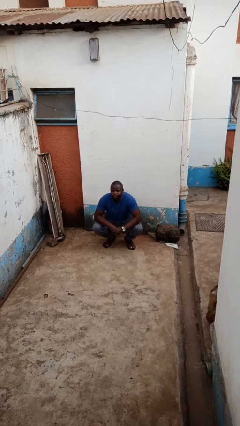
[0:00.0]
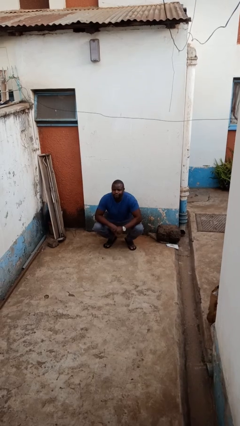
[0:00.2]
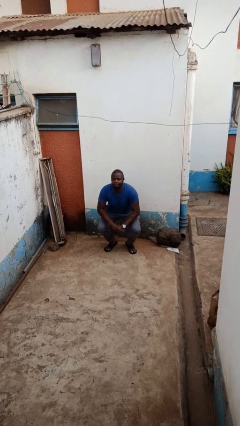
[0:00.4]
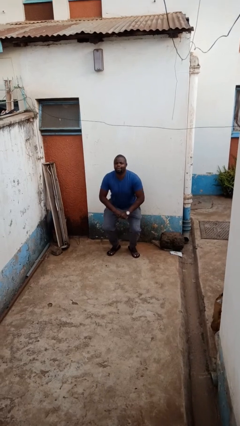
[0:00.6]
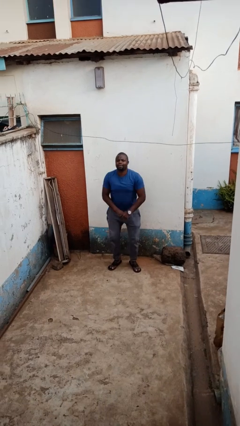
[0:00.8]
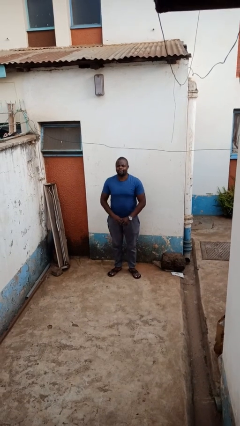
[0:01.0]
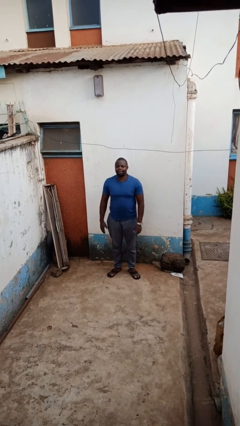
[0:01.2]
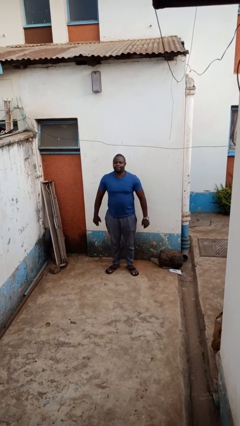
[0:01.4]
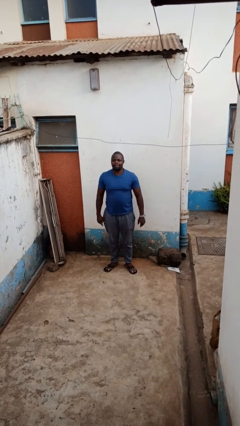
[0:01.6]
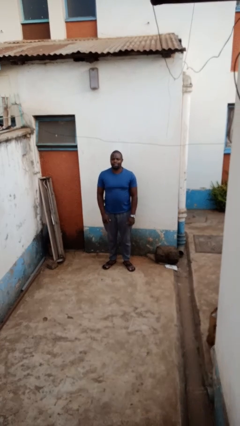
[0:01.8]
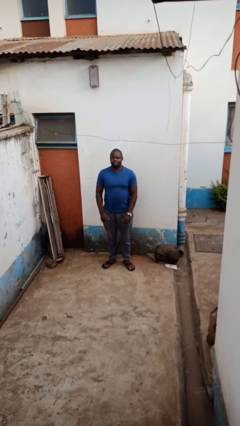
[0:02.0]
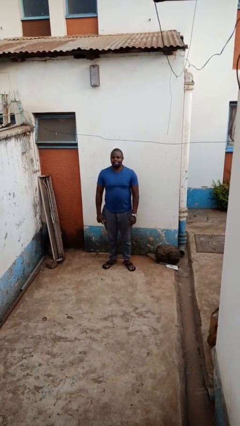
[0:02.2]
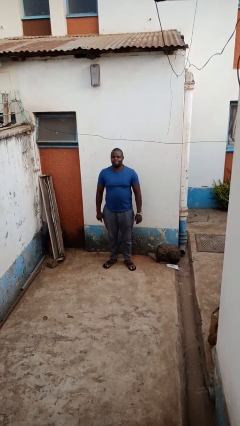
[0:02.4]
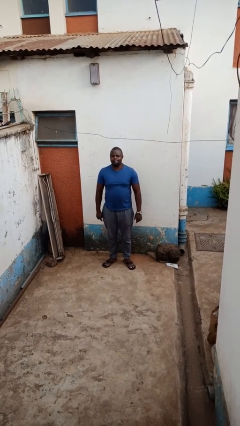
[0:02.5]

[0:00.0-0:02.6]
person stands up

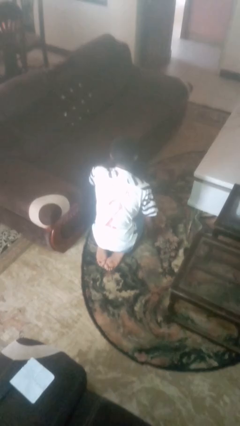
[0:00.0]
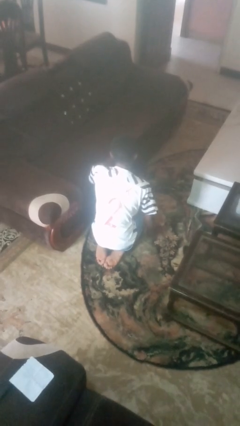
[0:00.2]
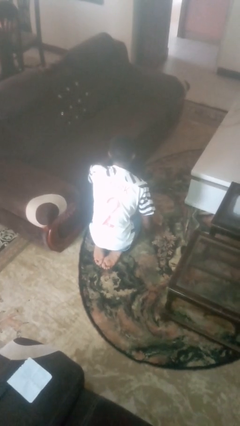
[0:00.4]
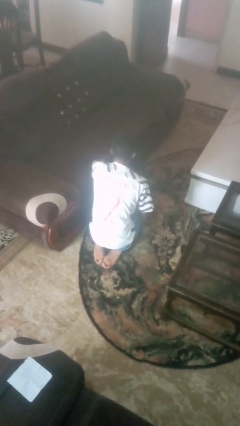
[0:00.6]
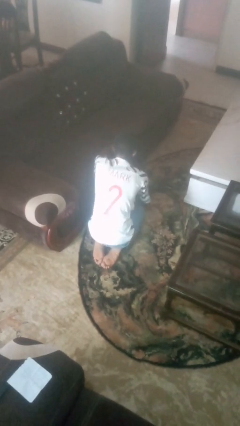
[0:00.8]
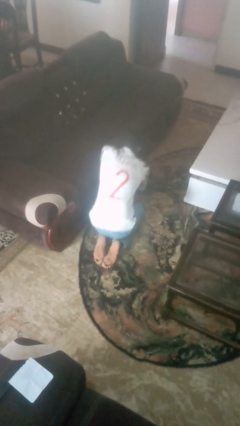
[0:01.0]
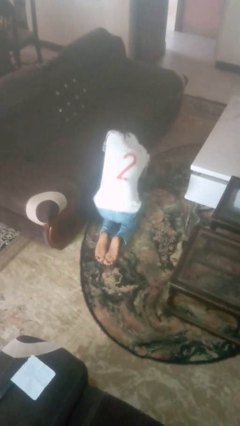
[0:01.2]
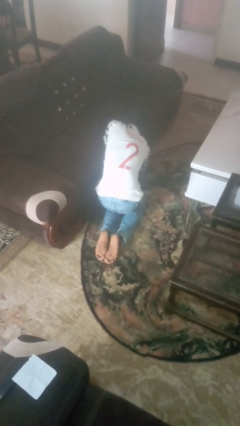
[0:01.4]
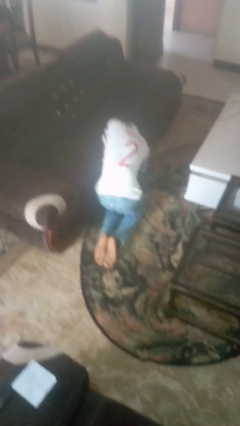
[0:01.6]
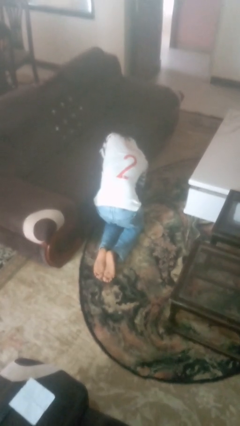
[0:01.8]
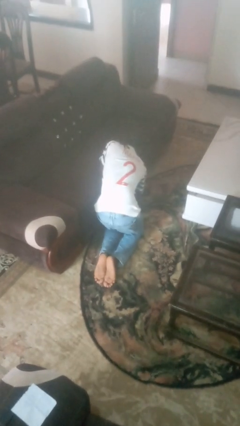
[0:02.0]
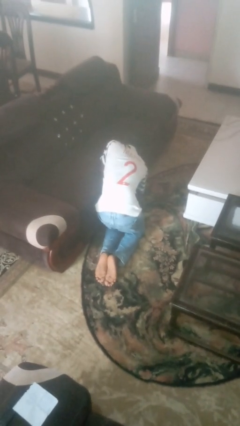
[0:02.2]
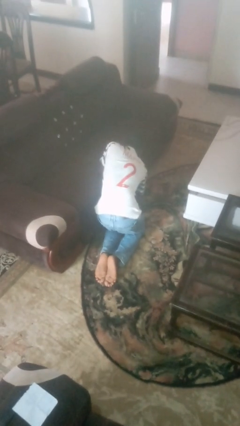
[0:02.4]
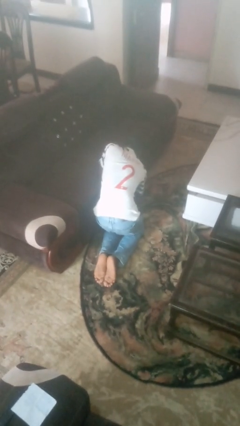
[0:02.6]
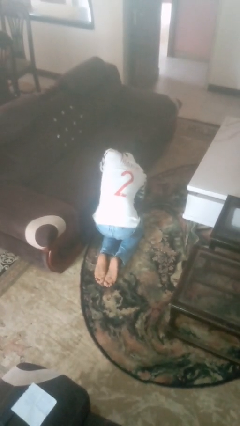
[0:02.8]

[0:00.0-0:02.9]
person searches under couch

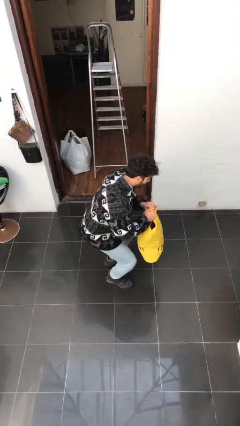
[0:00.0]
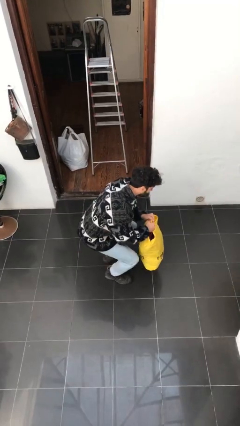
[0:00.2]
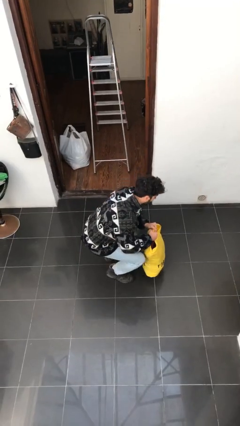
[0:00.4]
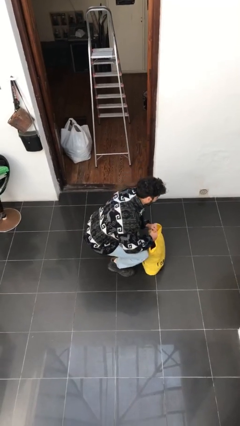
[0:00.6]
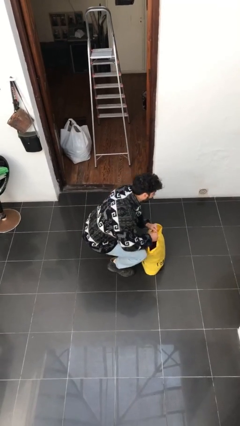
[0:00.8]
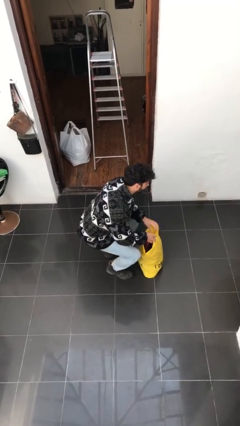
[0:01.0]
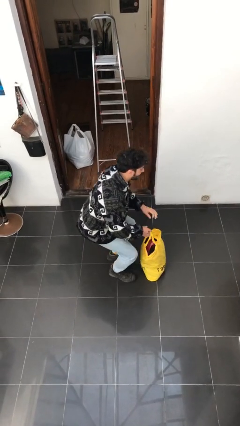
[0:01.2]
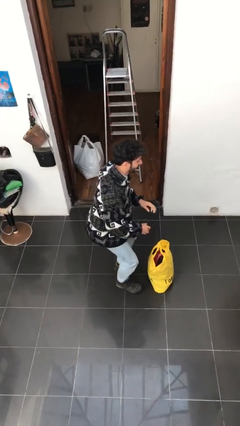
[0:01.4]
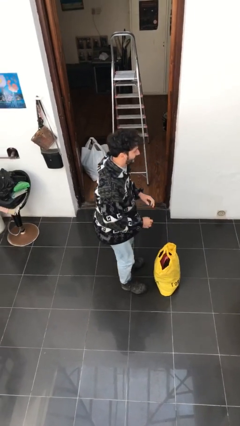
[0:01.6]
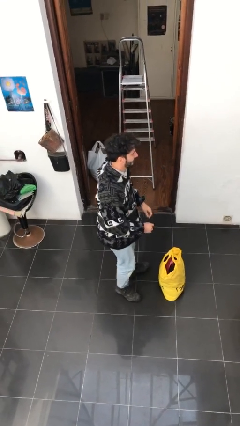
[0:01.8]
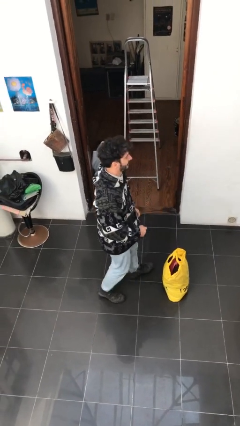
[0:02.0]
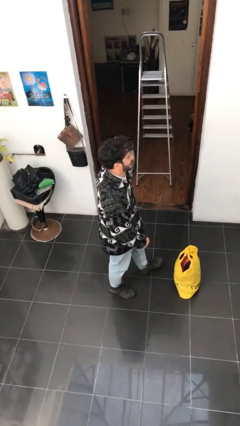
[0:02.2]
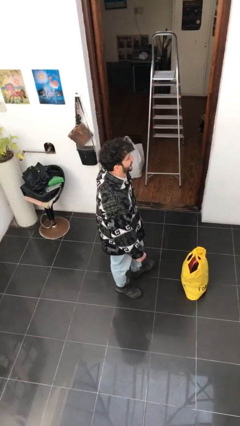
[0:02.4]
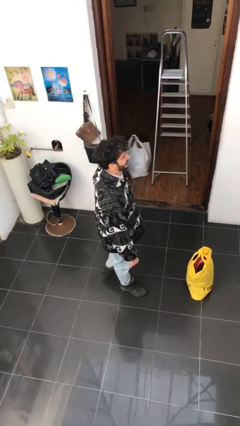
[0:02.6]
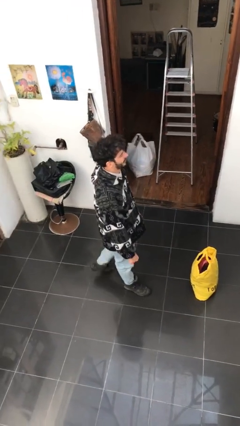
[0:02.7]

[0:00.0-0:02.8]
person puts down object on floor

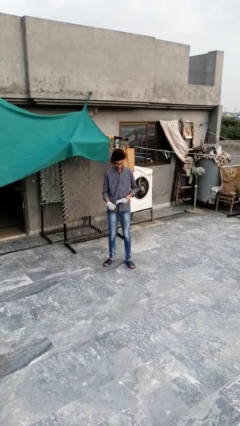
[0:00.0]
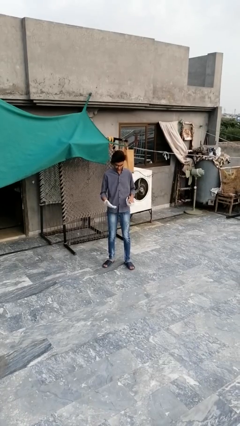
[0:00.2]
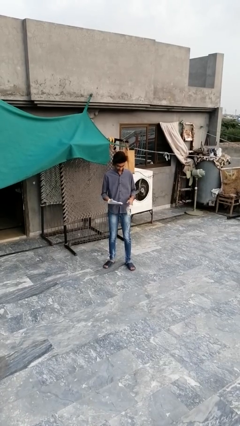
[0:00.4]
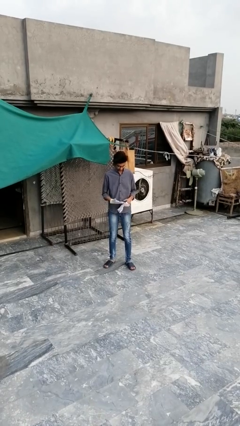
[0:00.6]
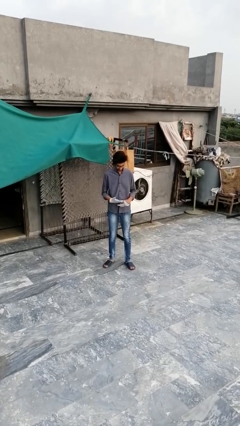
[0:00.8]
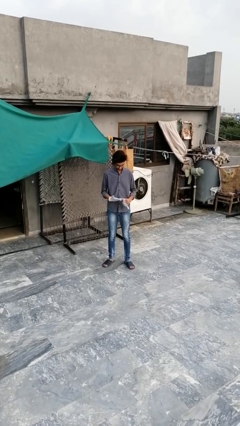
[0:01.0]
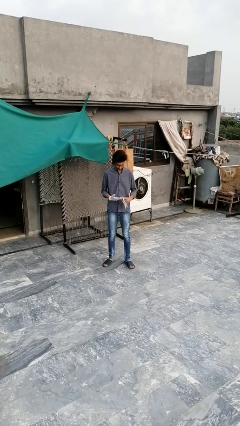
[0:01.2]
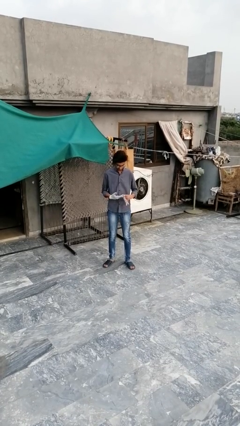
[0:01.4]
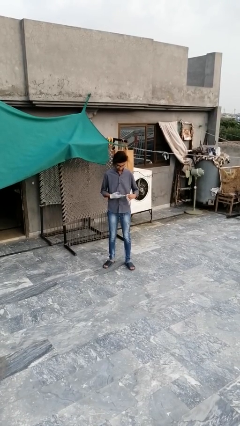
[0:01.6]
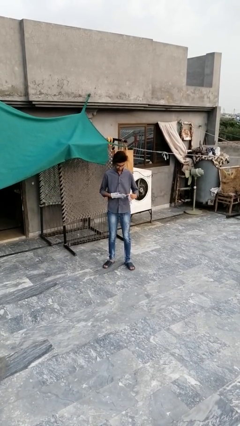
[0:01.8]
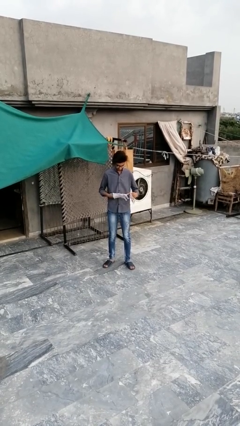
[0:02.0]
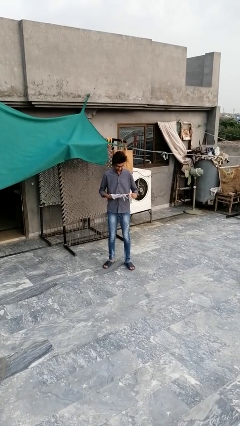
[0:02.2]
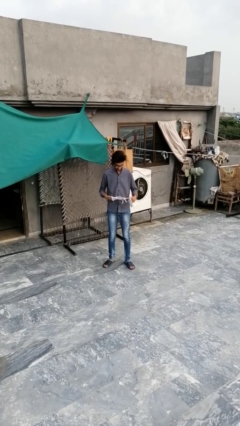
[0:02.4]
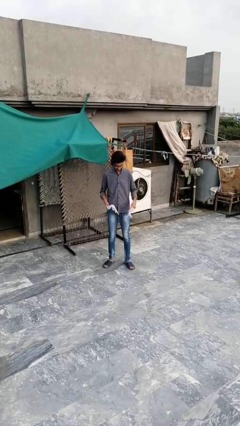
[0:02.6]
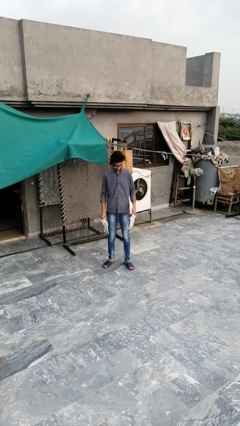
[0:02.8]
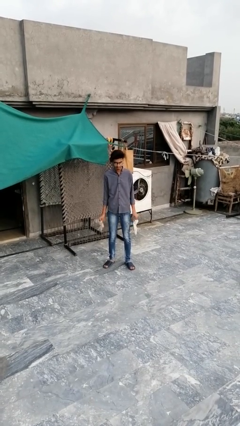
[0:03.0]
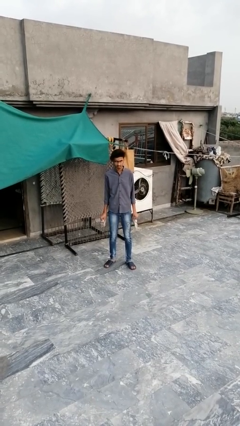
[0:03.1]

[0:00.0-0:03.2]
person takes off gloves

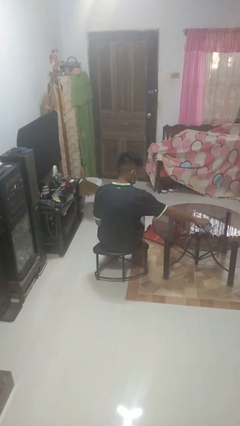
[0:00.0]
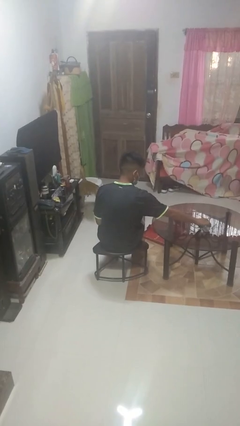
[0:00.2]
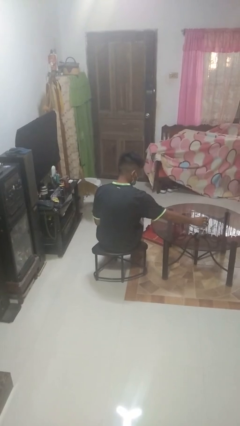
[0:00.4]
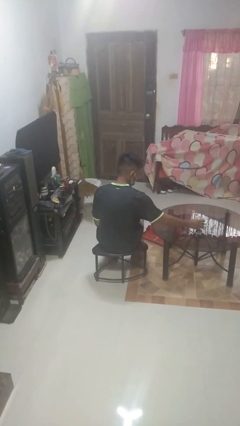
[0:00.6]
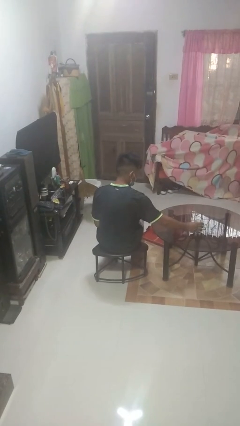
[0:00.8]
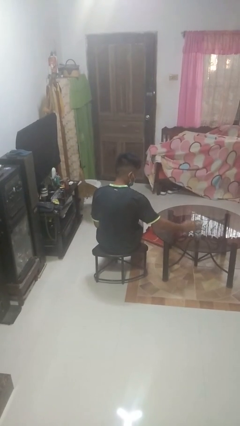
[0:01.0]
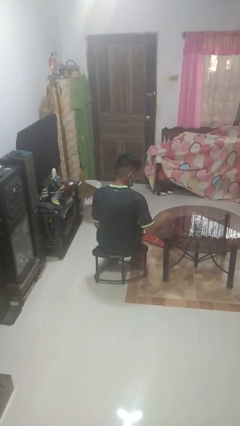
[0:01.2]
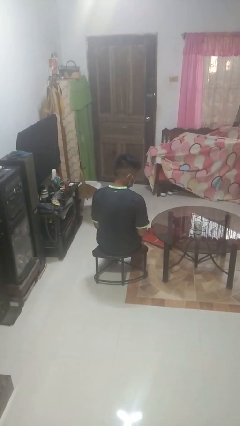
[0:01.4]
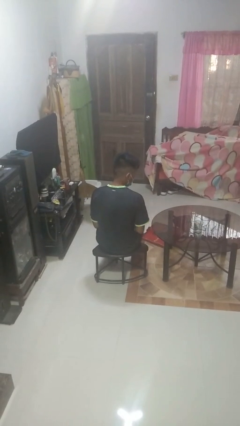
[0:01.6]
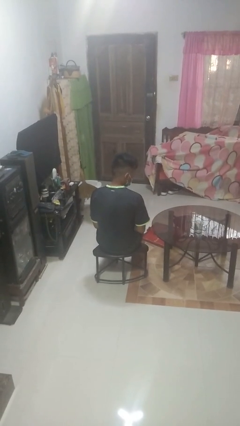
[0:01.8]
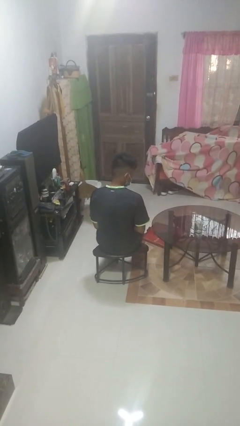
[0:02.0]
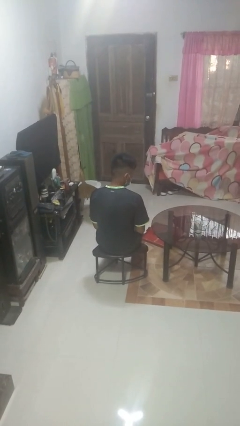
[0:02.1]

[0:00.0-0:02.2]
person sets upright glass

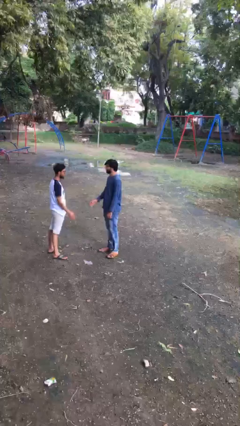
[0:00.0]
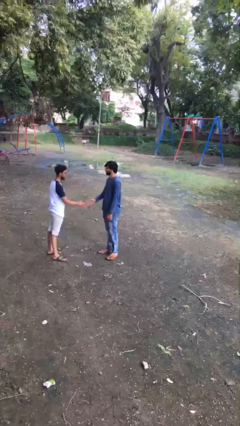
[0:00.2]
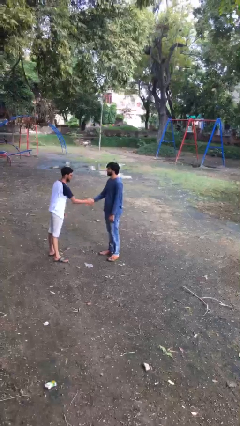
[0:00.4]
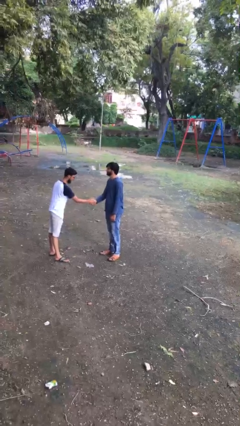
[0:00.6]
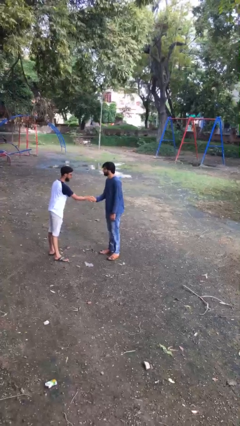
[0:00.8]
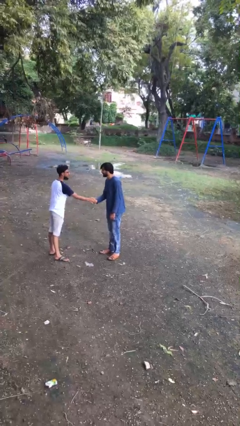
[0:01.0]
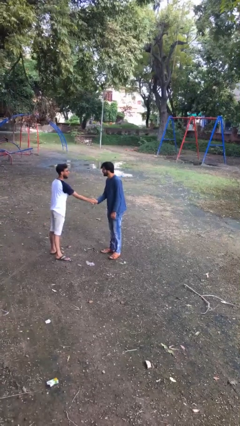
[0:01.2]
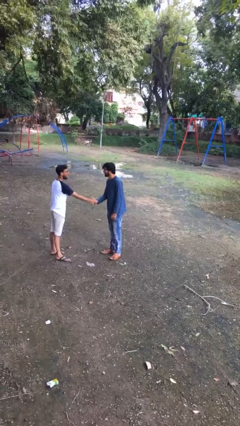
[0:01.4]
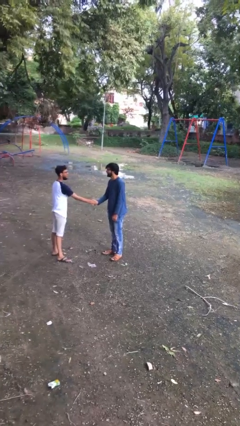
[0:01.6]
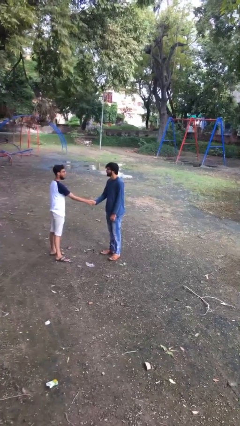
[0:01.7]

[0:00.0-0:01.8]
person shakes hand

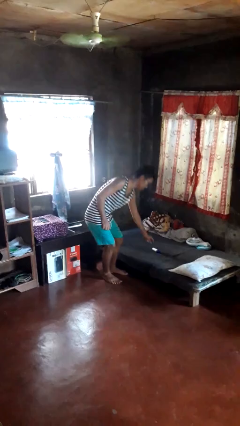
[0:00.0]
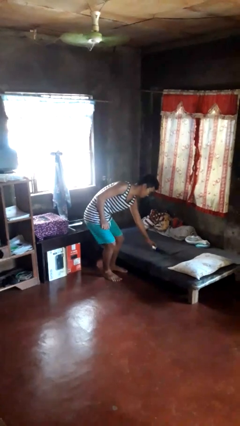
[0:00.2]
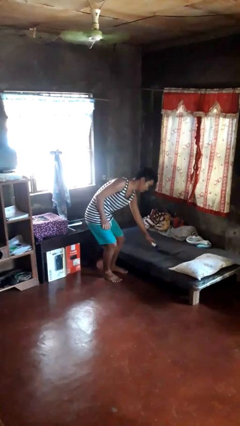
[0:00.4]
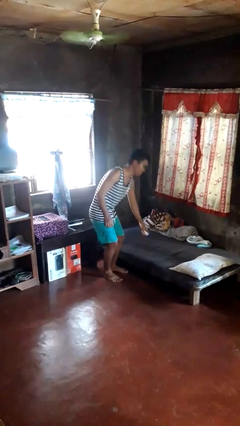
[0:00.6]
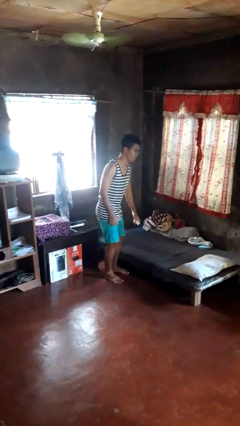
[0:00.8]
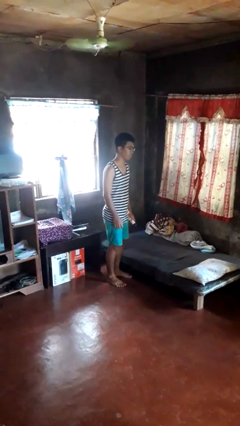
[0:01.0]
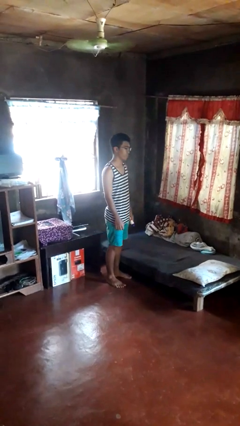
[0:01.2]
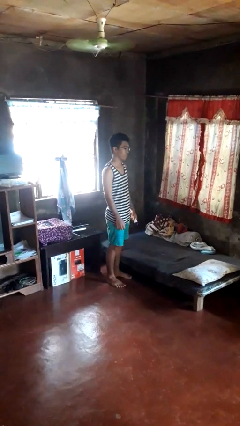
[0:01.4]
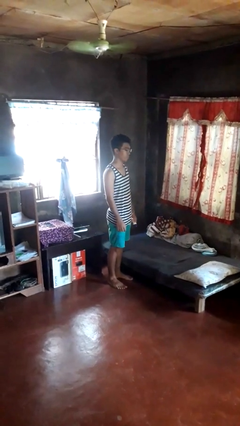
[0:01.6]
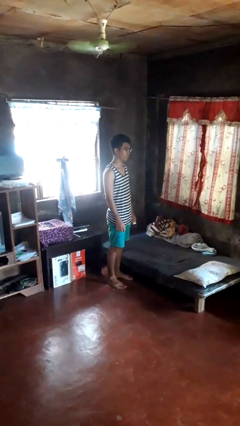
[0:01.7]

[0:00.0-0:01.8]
person picks up object from bed
